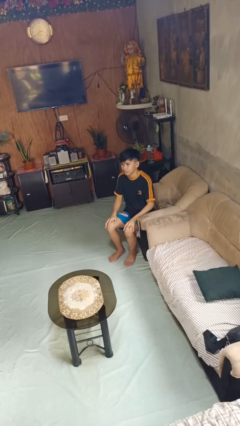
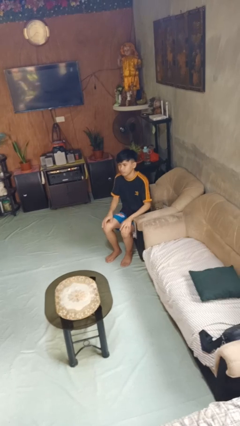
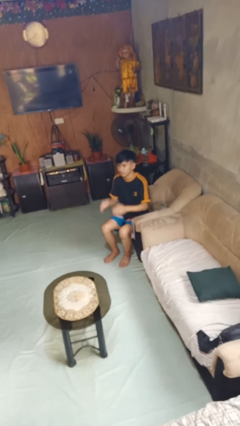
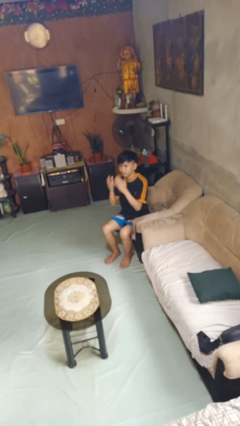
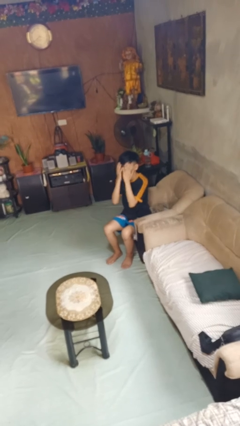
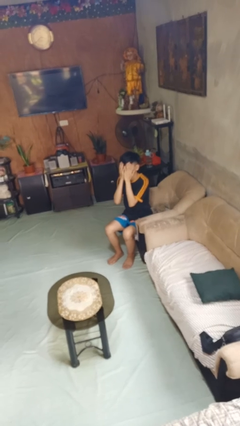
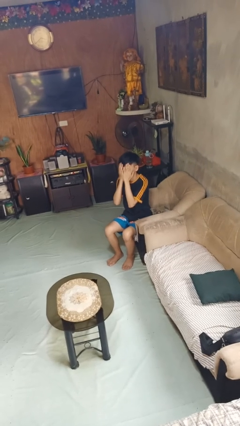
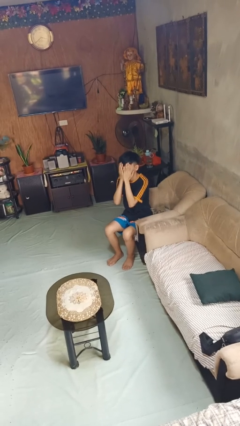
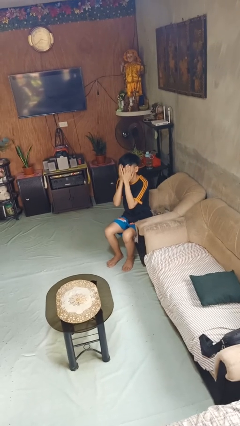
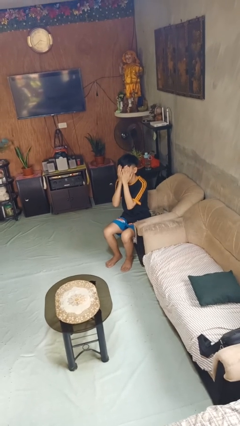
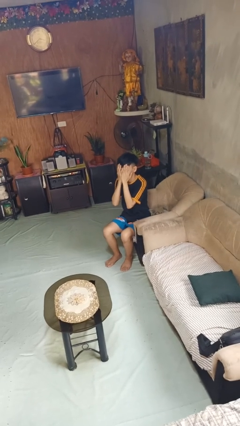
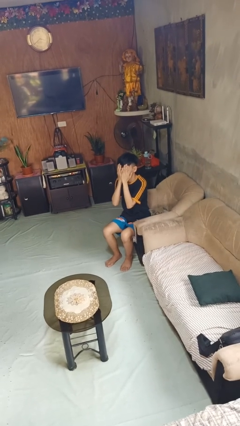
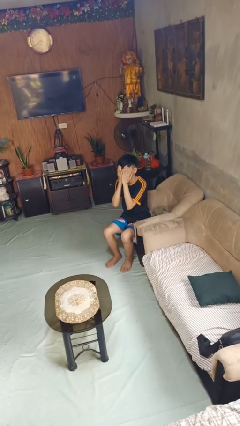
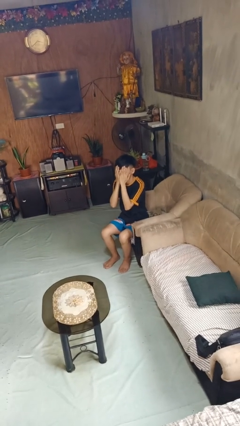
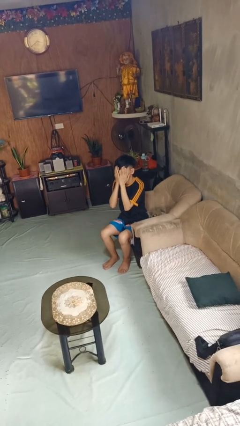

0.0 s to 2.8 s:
person covers face with hands

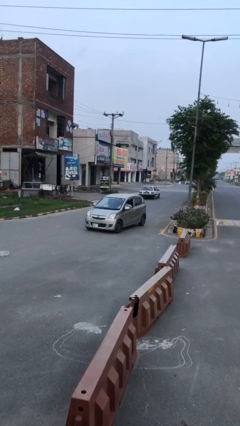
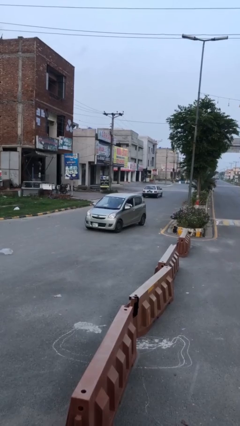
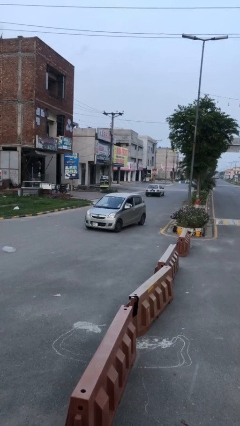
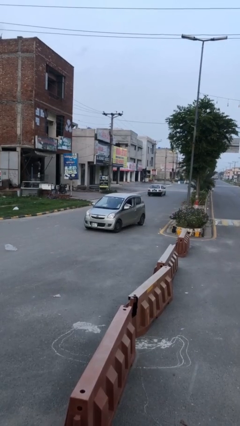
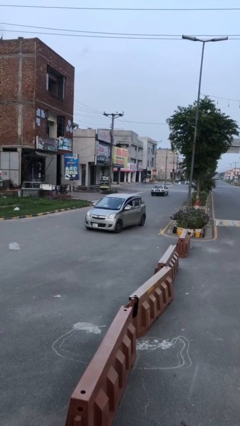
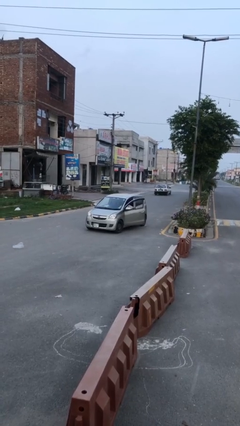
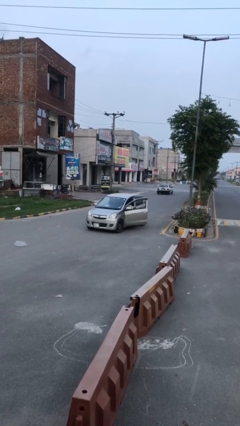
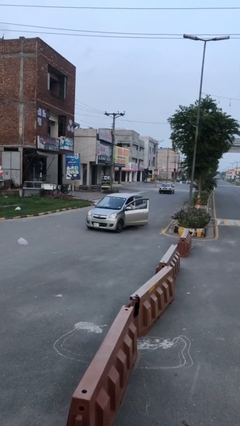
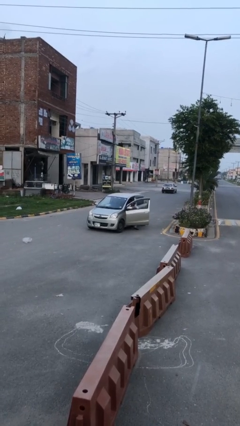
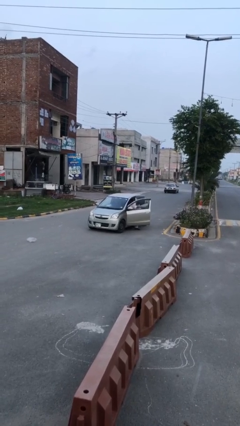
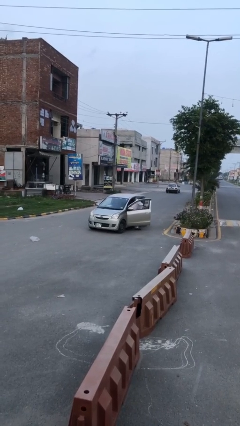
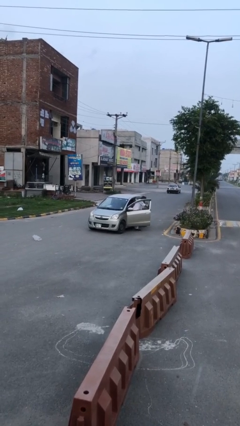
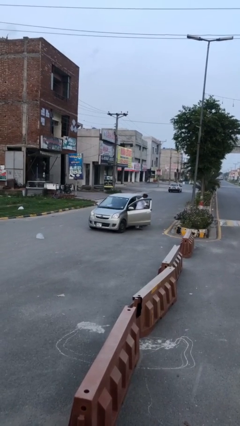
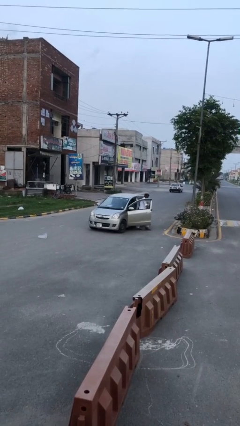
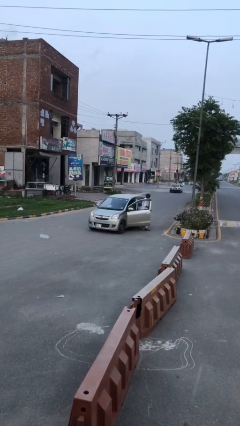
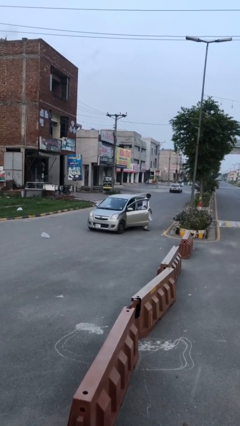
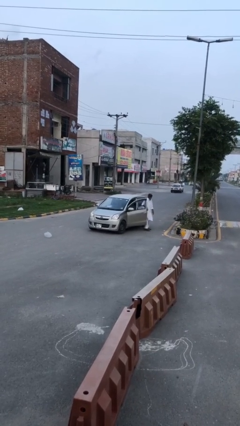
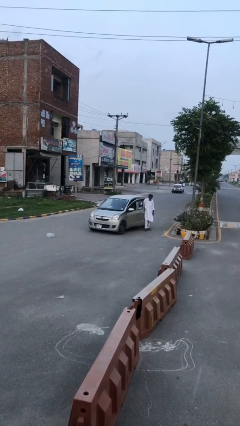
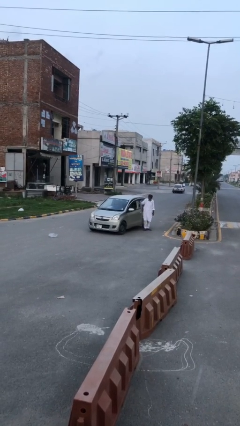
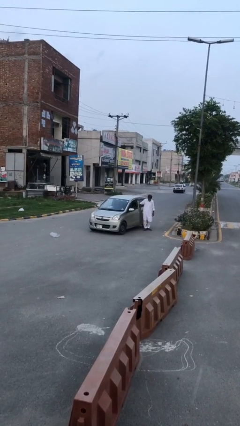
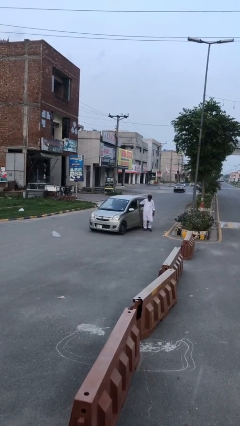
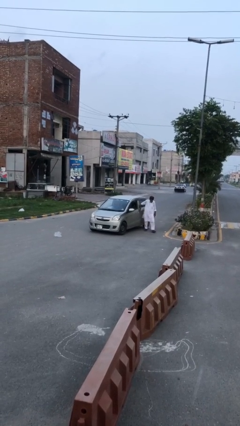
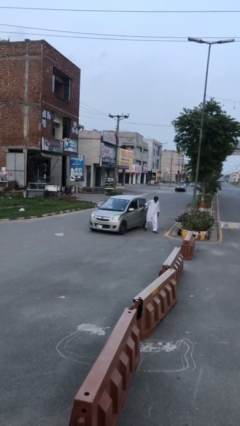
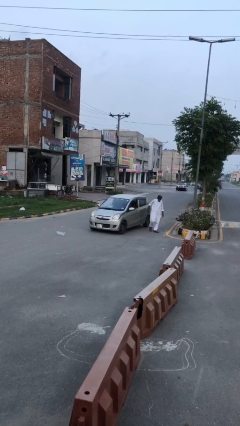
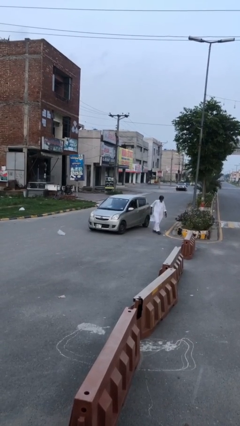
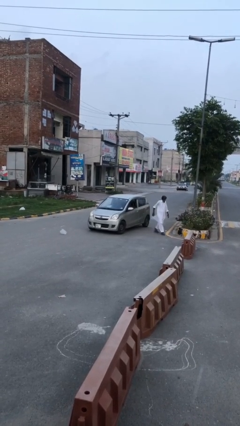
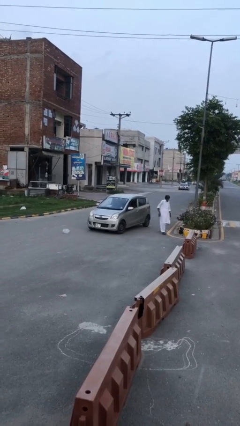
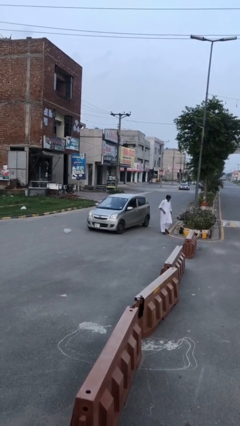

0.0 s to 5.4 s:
car drops off person

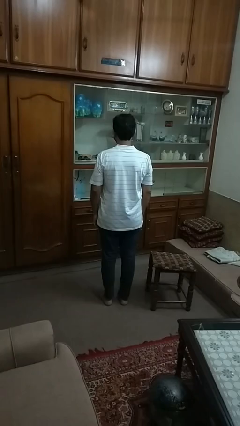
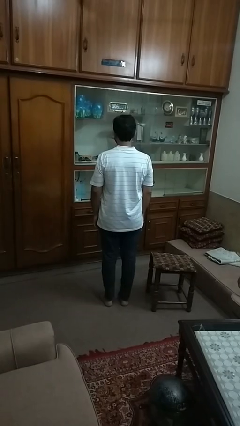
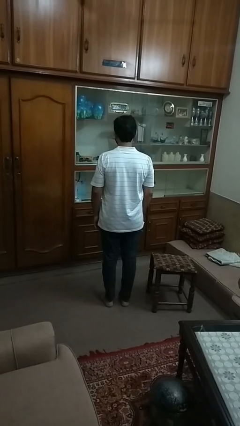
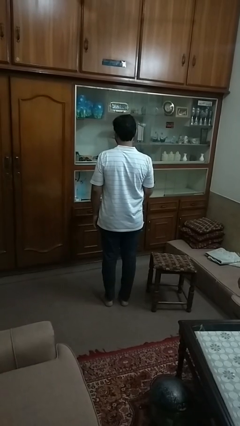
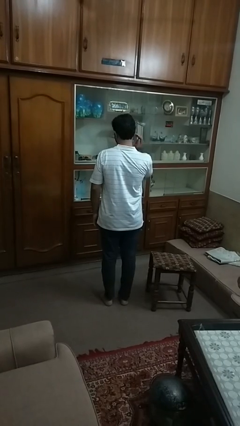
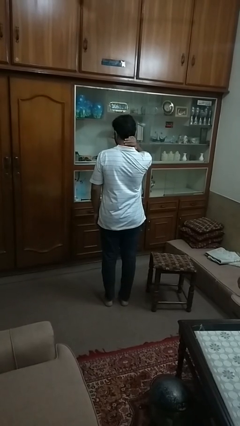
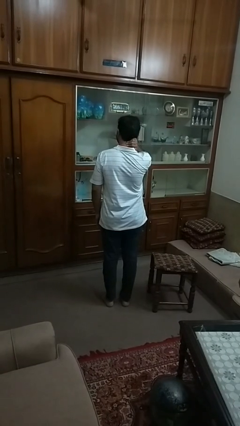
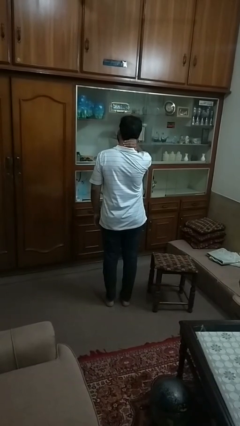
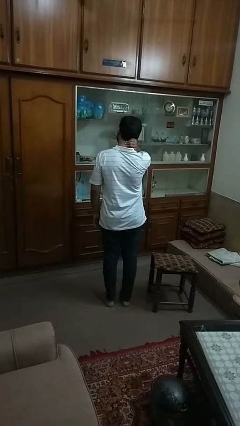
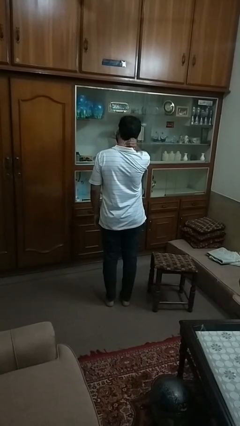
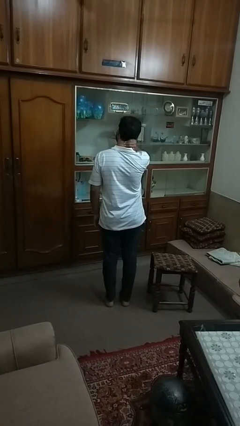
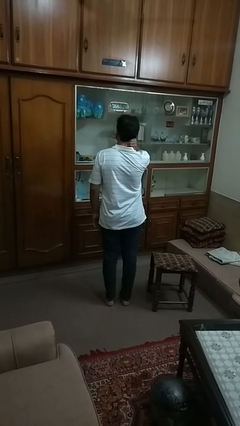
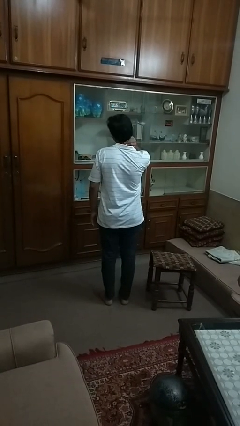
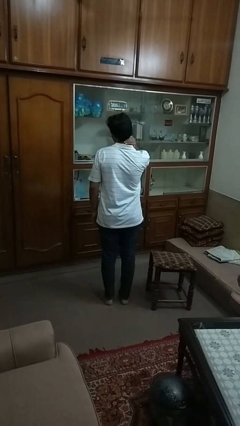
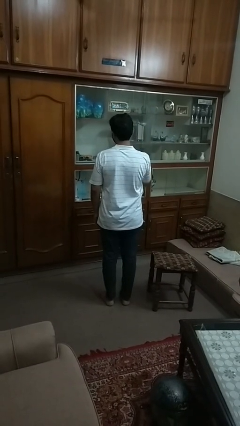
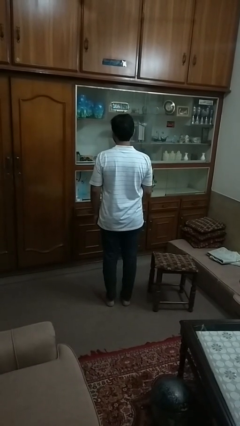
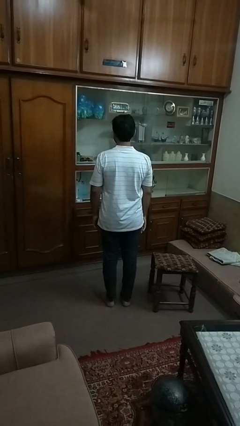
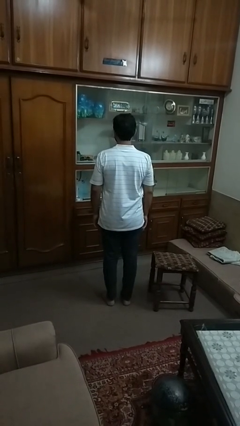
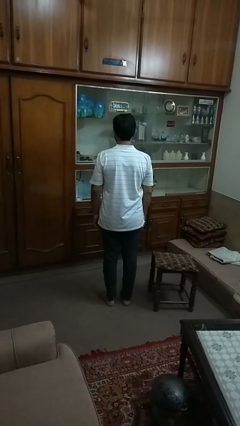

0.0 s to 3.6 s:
person rubs neck

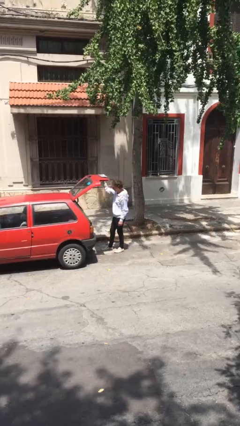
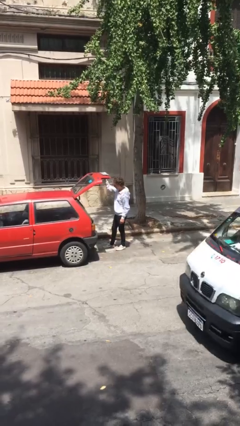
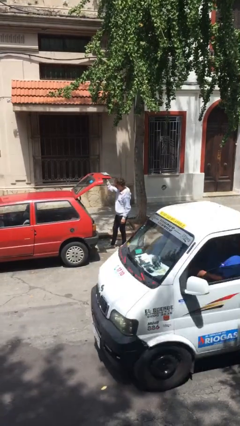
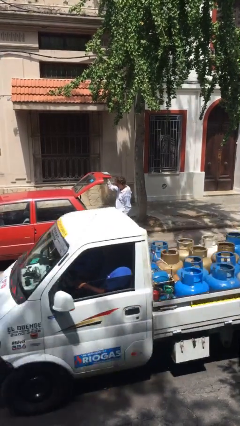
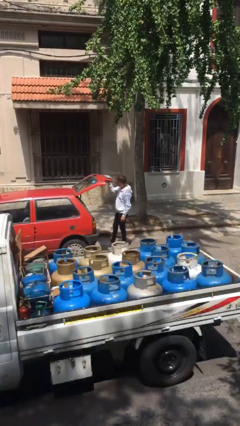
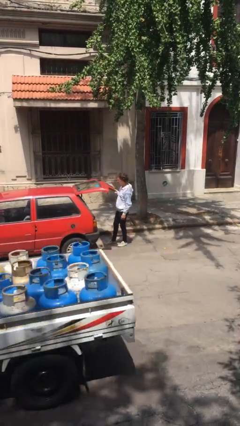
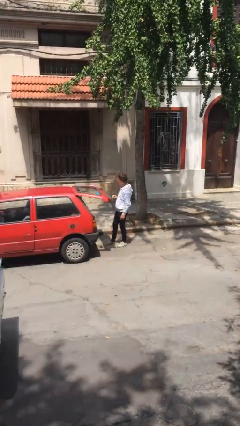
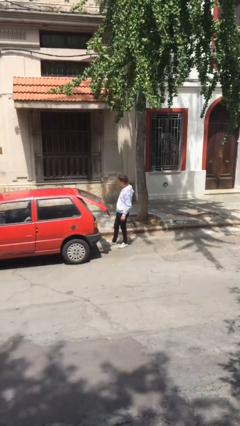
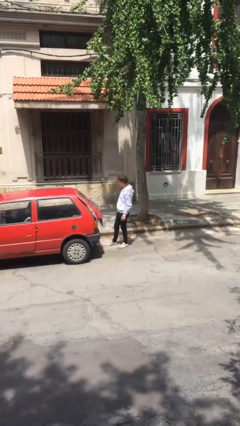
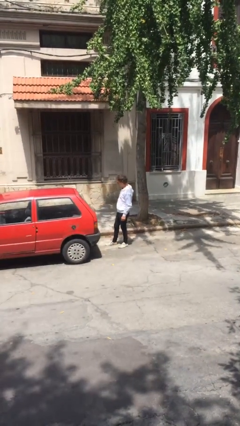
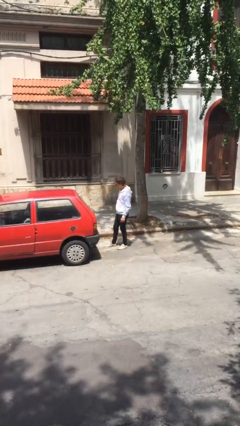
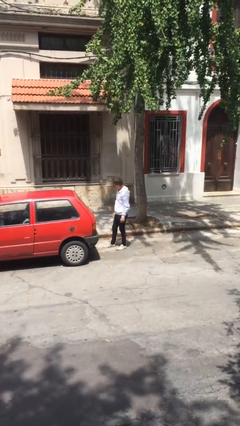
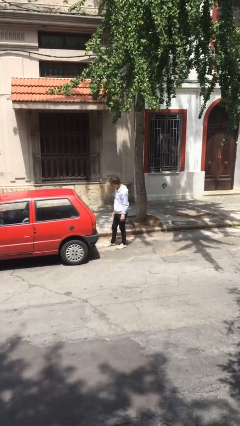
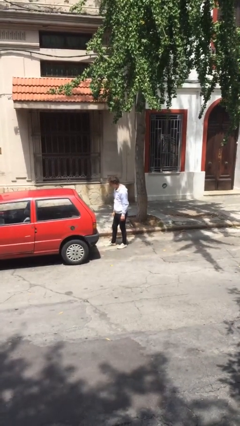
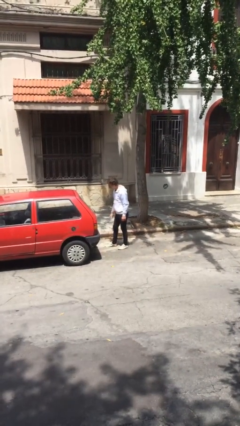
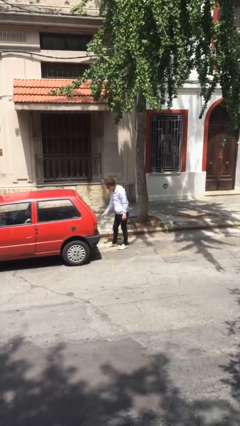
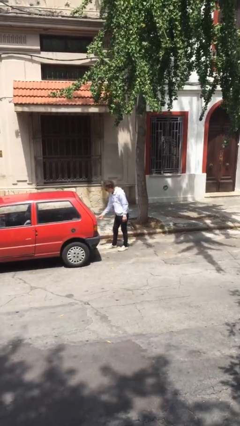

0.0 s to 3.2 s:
person closes car trunk

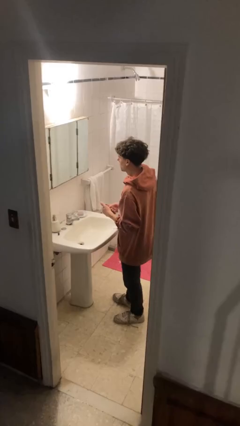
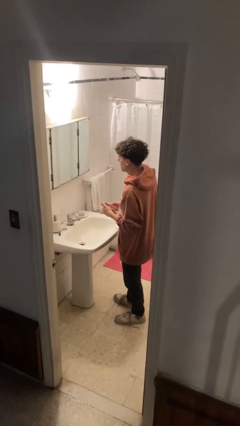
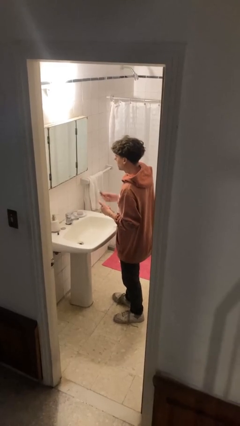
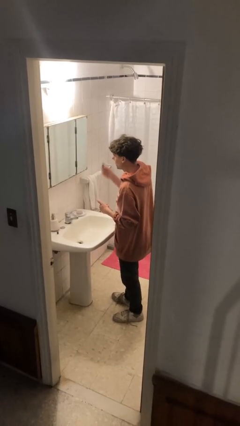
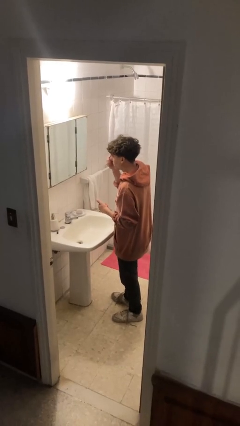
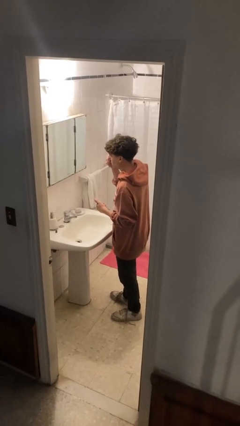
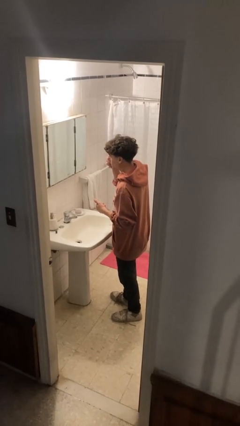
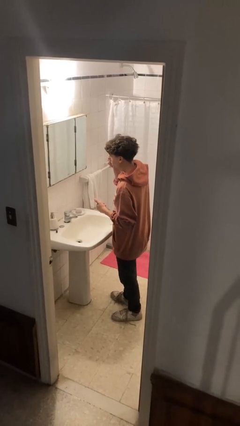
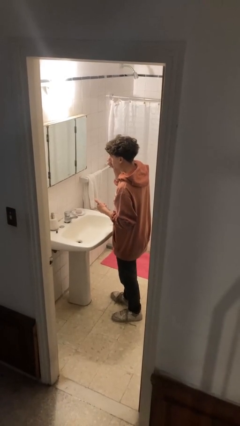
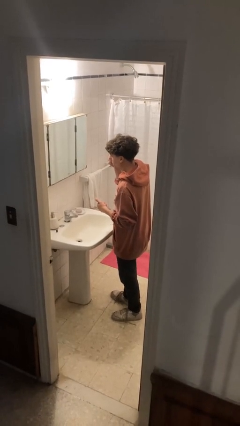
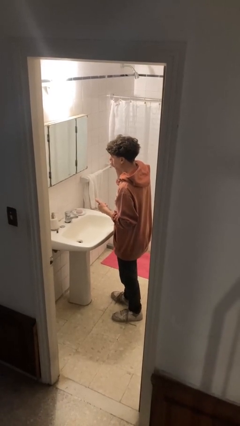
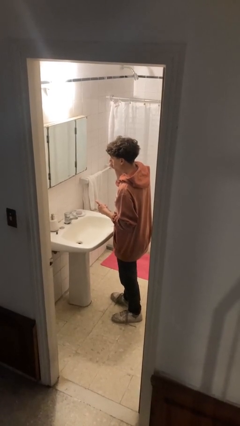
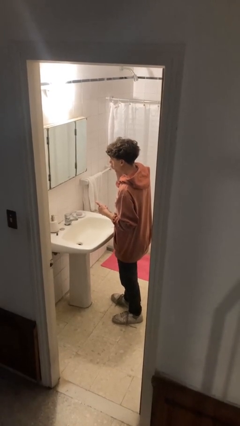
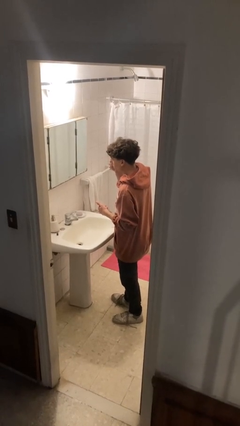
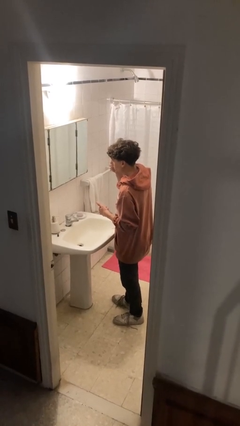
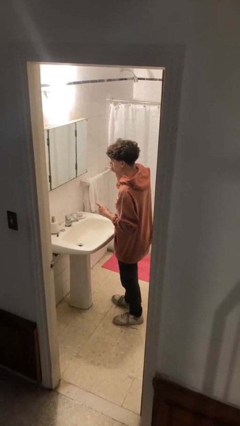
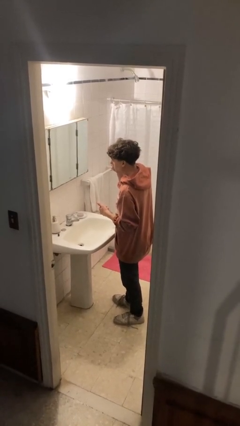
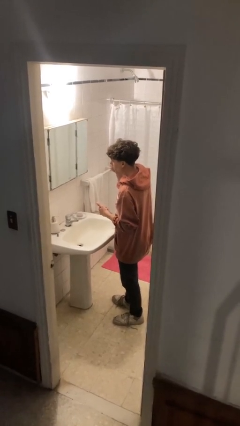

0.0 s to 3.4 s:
person applies lip makeup
